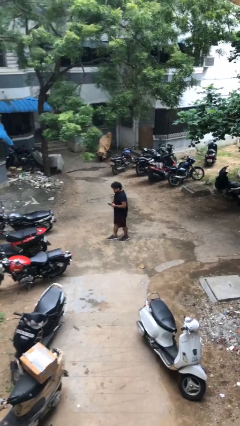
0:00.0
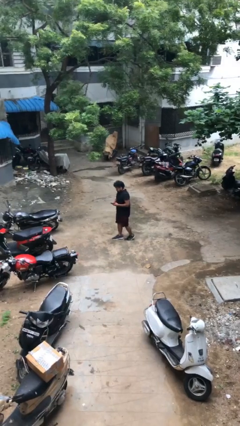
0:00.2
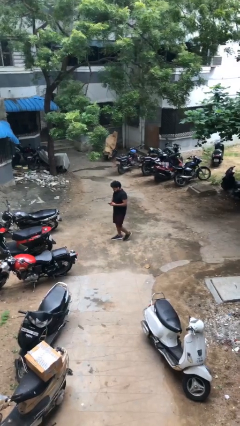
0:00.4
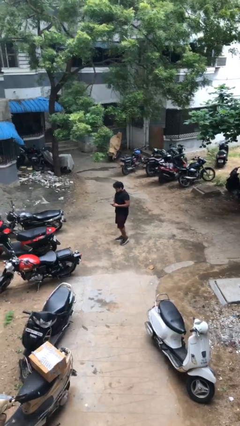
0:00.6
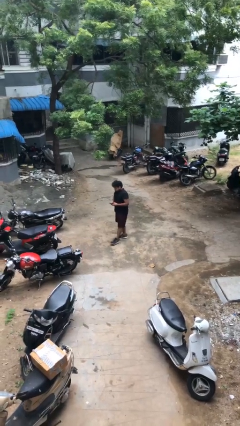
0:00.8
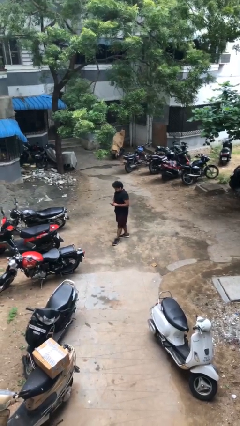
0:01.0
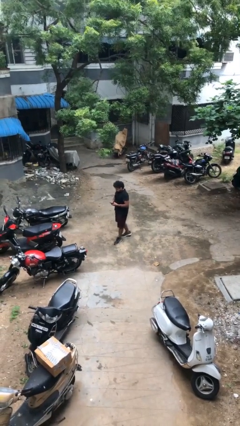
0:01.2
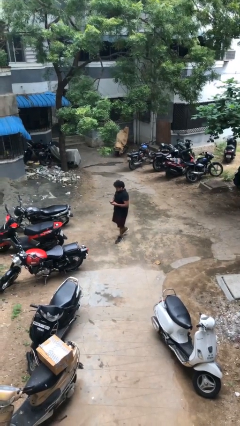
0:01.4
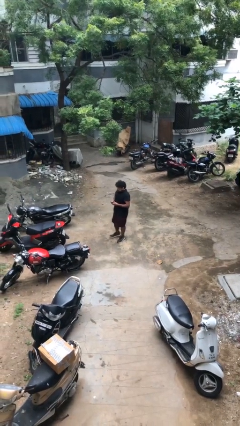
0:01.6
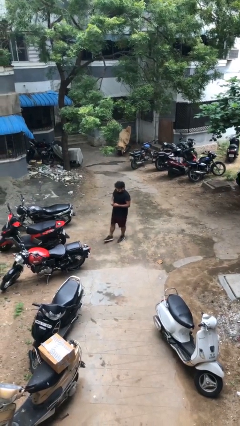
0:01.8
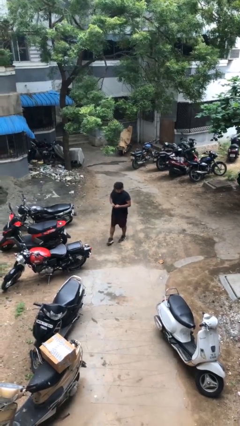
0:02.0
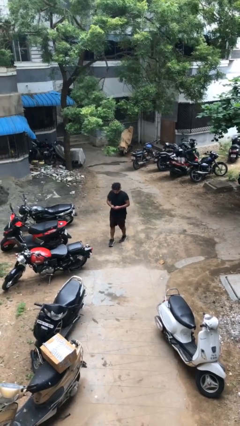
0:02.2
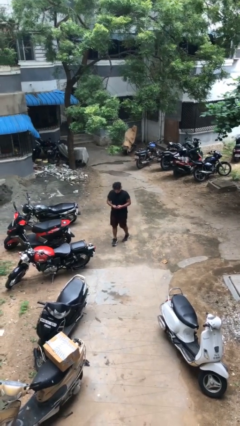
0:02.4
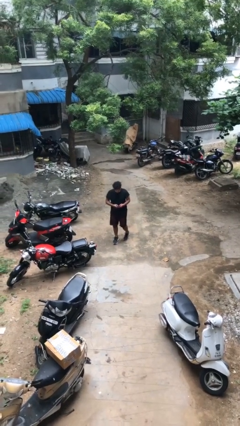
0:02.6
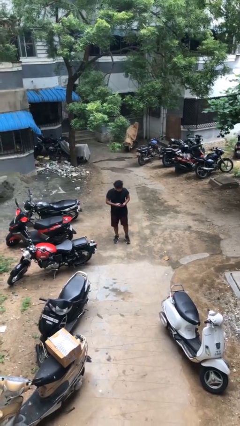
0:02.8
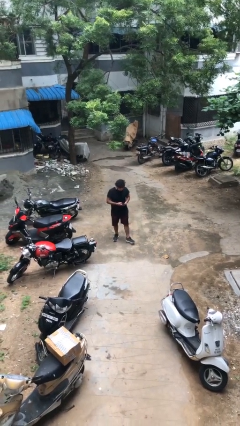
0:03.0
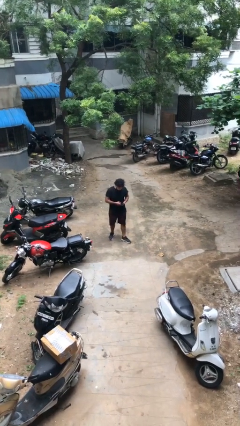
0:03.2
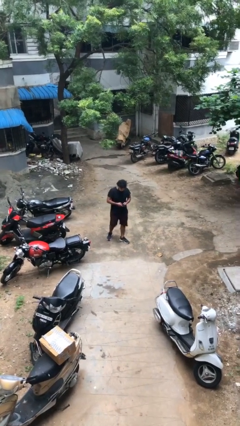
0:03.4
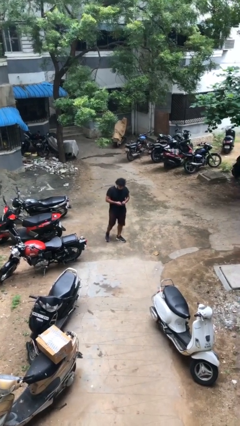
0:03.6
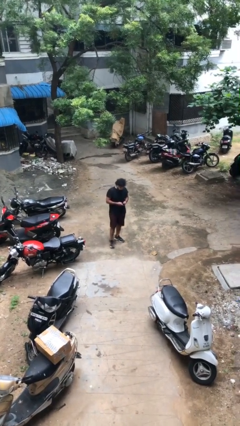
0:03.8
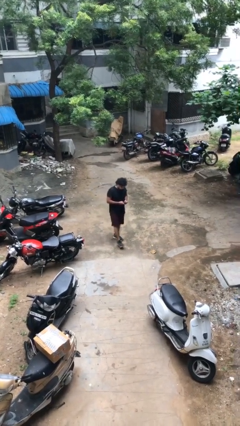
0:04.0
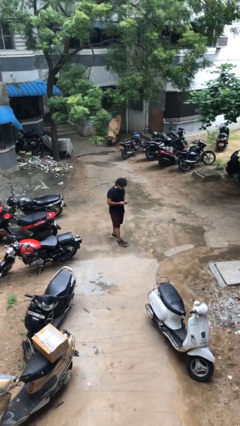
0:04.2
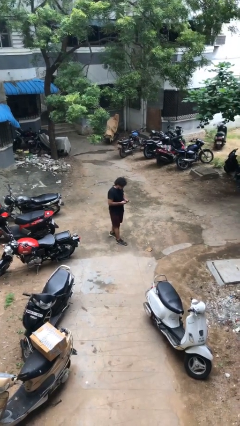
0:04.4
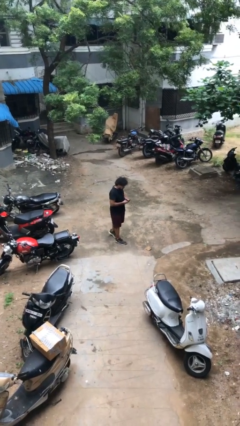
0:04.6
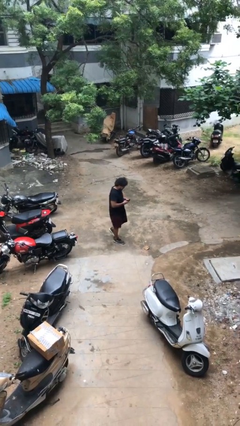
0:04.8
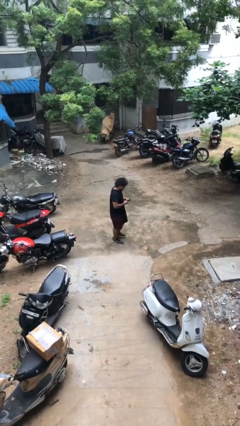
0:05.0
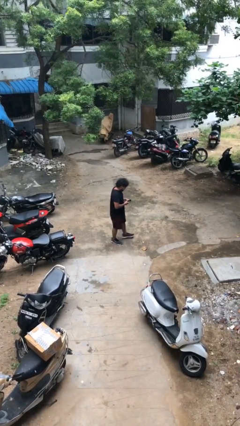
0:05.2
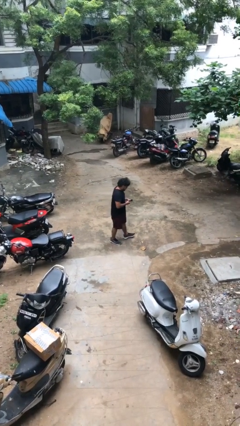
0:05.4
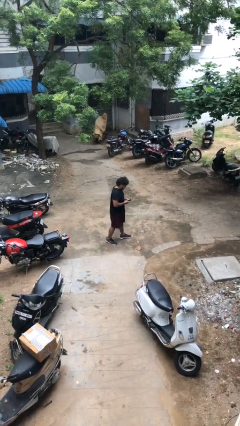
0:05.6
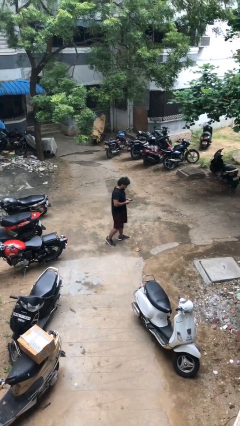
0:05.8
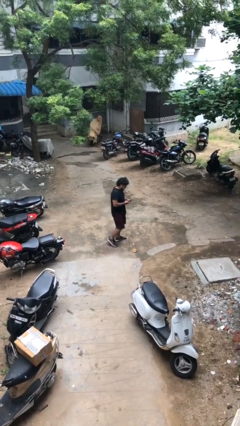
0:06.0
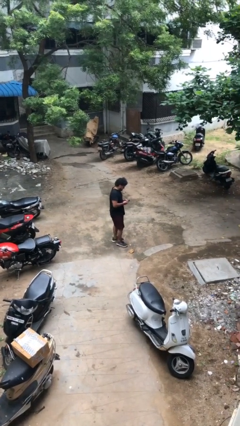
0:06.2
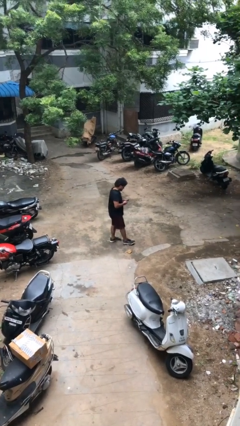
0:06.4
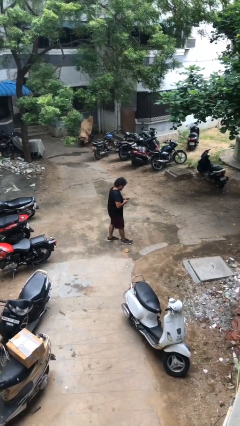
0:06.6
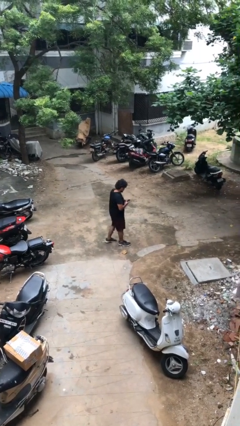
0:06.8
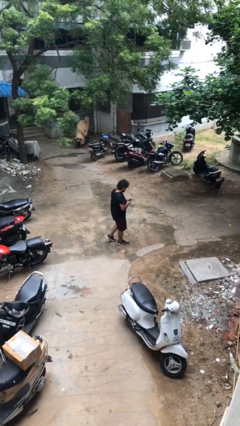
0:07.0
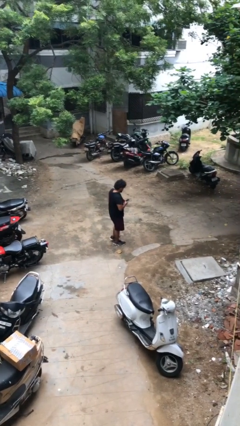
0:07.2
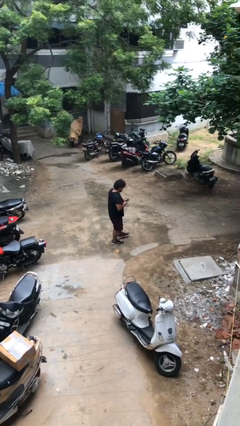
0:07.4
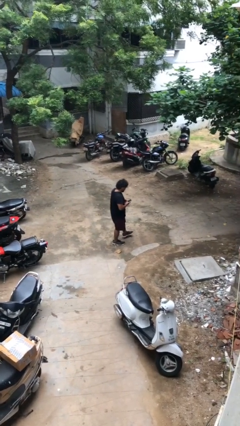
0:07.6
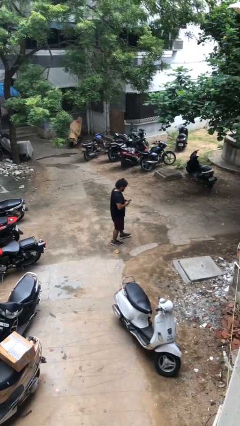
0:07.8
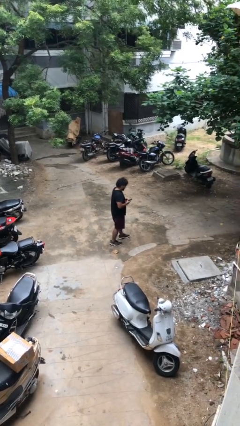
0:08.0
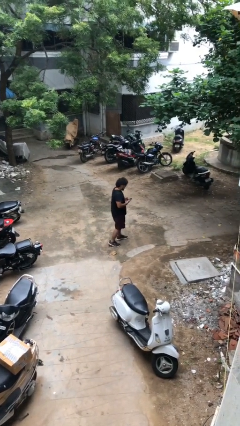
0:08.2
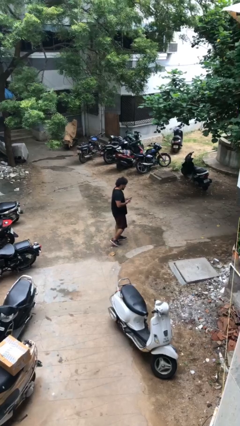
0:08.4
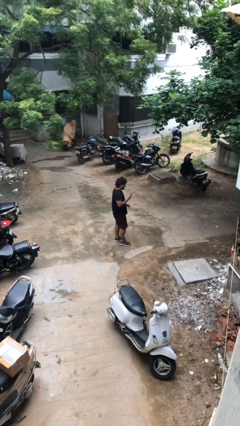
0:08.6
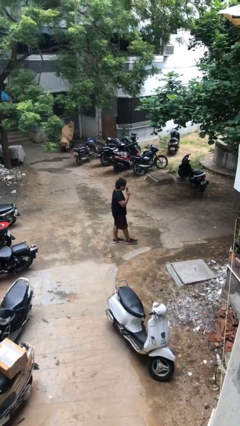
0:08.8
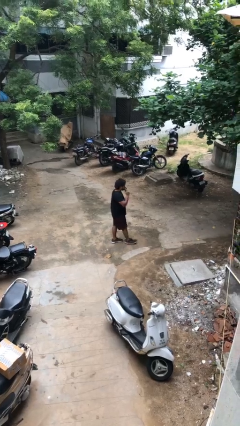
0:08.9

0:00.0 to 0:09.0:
person texts on phone

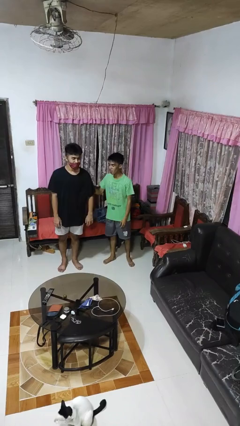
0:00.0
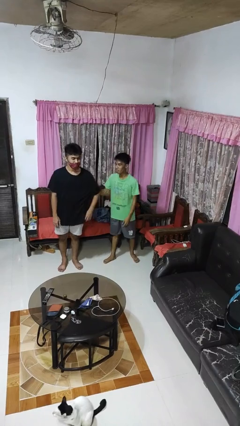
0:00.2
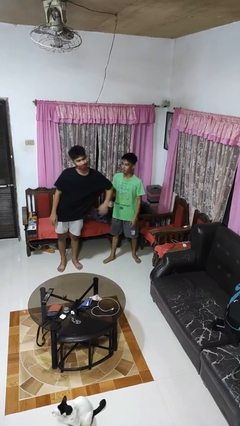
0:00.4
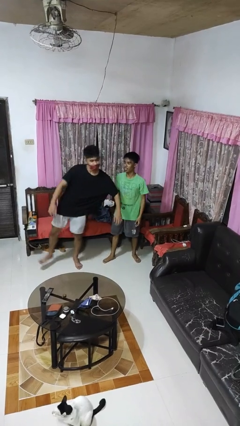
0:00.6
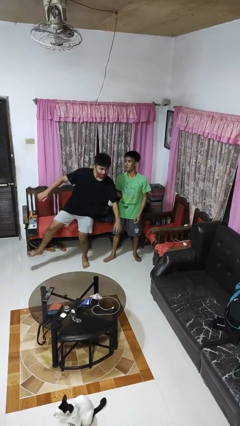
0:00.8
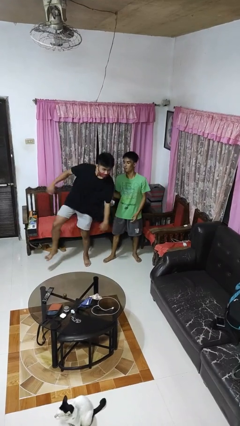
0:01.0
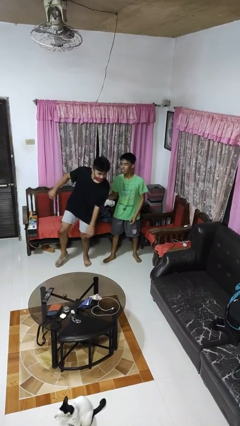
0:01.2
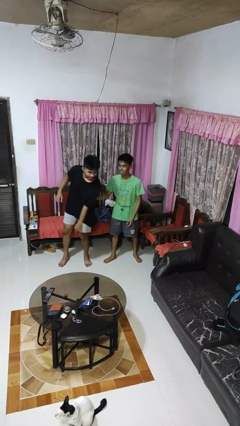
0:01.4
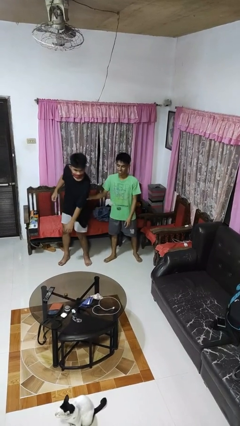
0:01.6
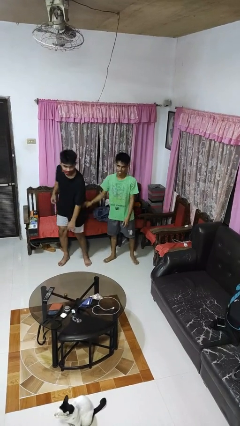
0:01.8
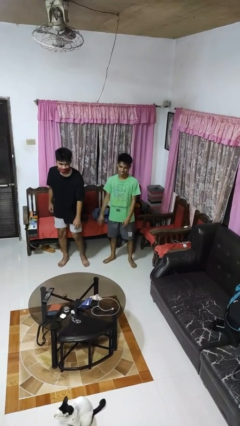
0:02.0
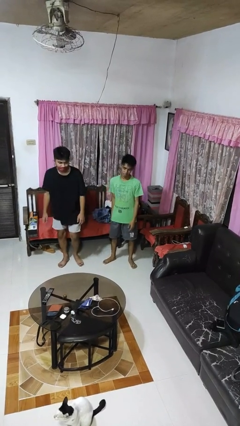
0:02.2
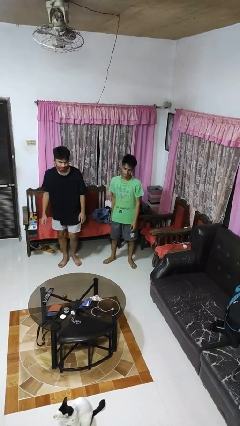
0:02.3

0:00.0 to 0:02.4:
person grabs person by bicep

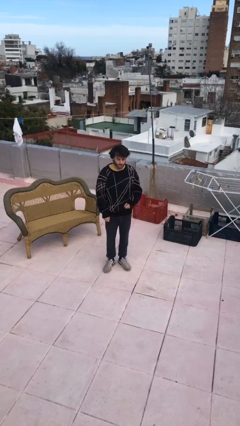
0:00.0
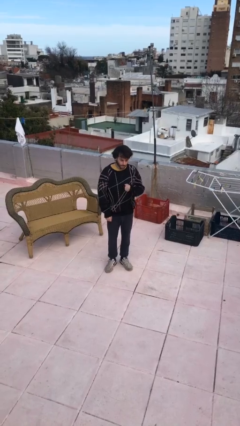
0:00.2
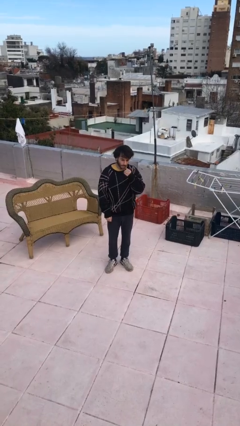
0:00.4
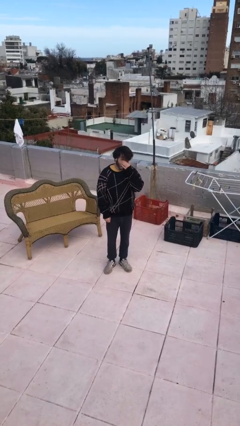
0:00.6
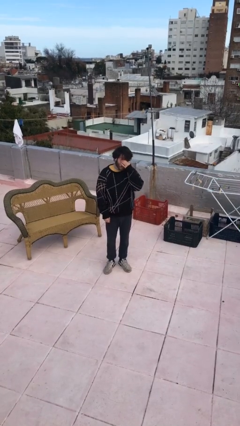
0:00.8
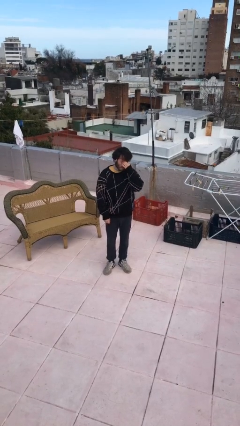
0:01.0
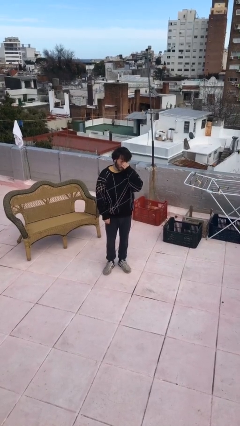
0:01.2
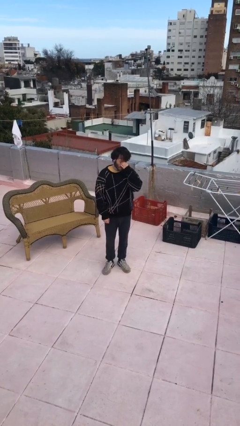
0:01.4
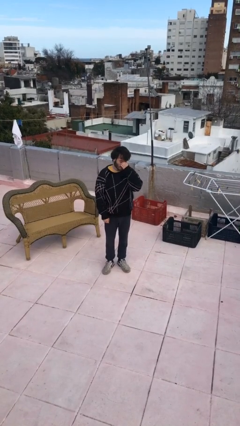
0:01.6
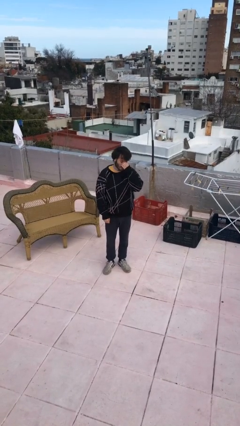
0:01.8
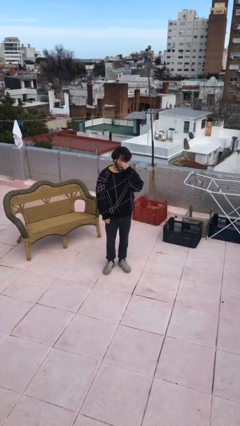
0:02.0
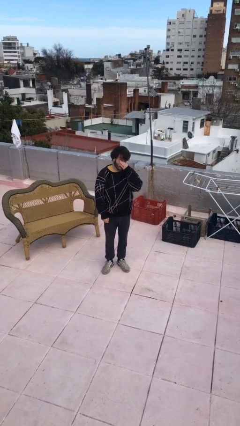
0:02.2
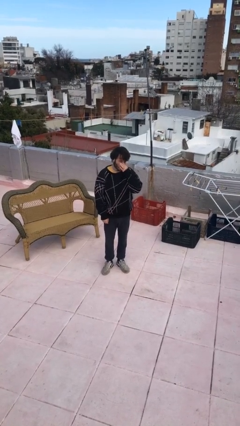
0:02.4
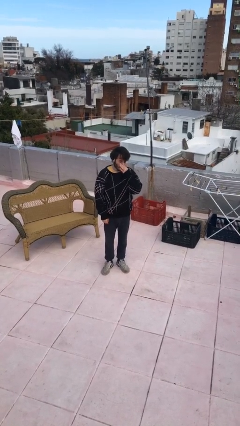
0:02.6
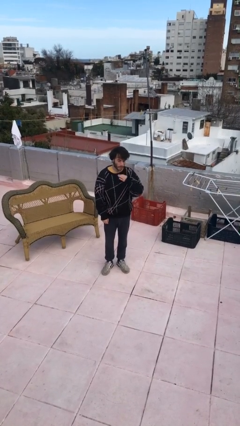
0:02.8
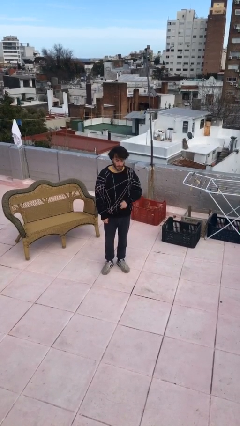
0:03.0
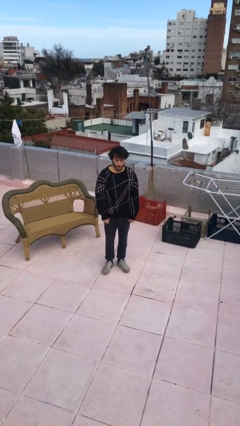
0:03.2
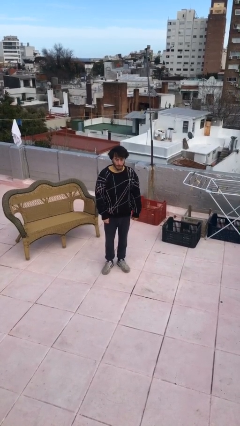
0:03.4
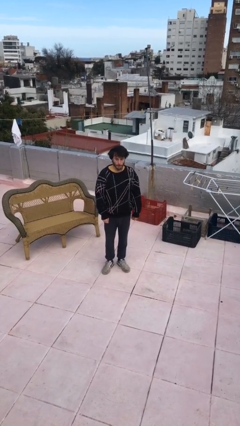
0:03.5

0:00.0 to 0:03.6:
person scratches face

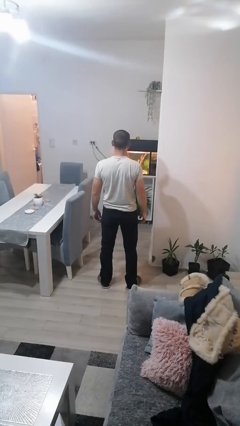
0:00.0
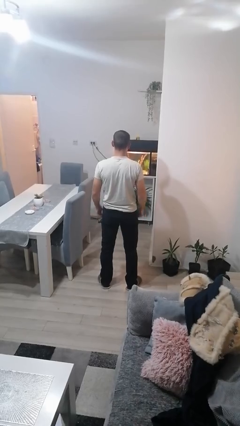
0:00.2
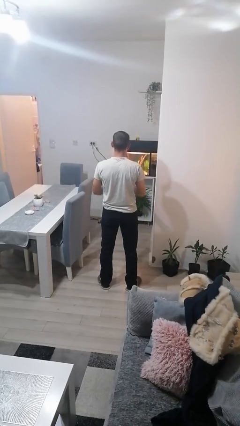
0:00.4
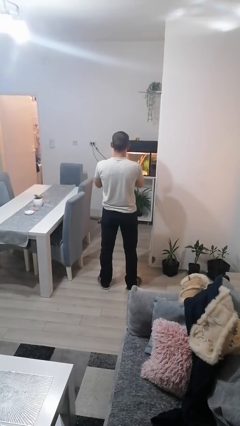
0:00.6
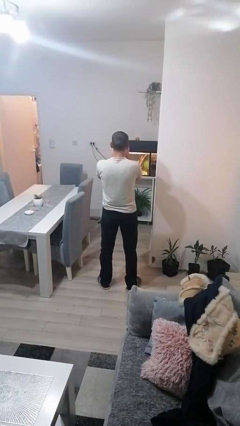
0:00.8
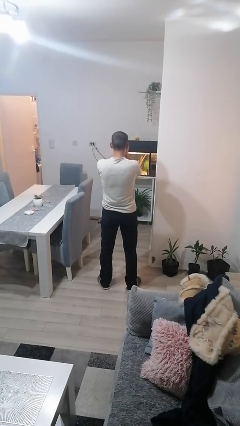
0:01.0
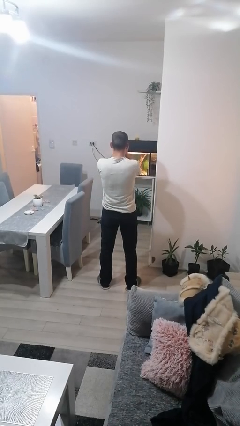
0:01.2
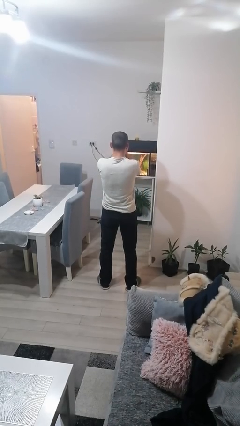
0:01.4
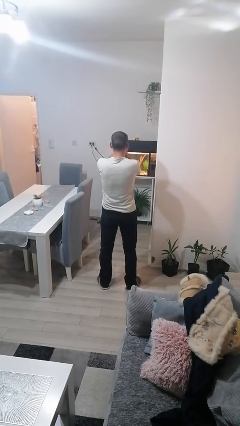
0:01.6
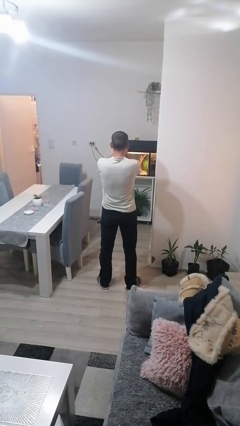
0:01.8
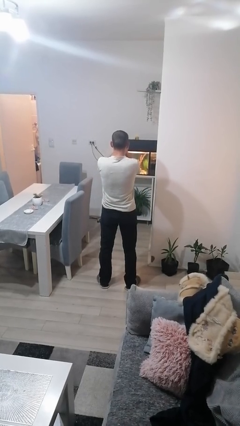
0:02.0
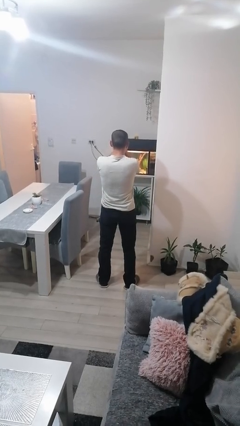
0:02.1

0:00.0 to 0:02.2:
person covers face with hands

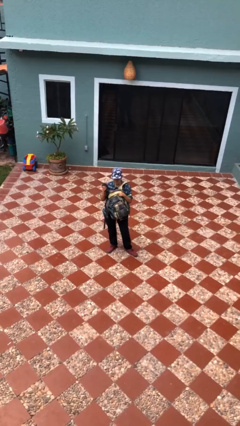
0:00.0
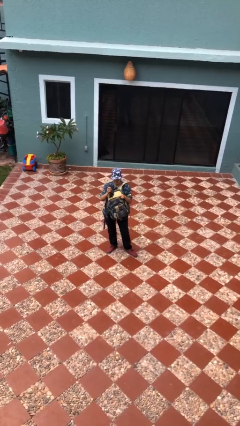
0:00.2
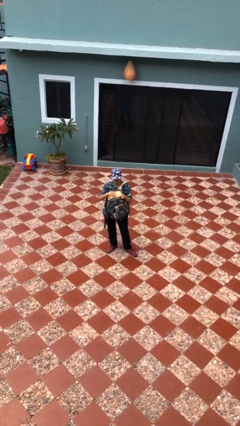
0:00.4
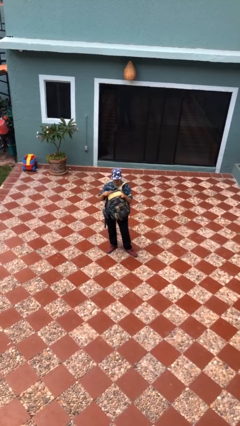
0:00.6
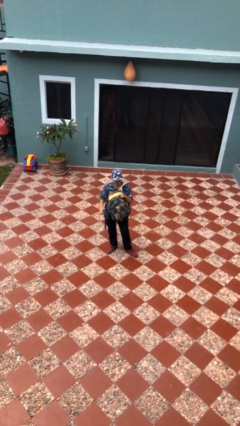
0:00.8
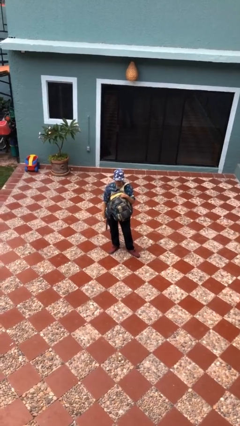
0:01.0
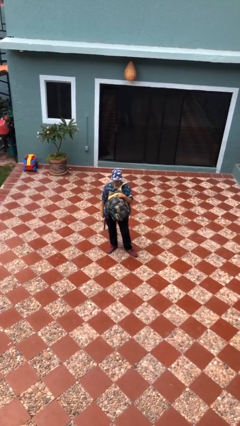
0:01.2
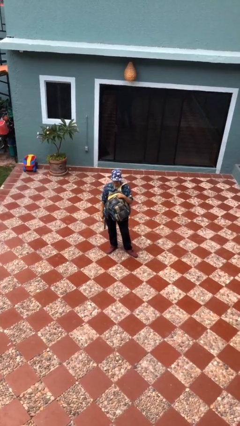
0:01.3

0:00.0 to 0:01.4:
person puts object into backpack
